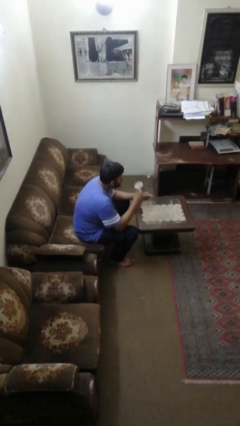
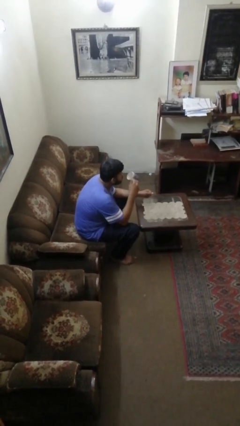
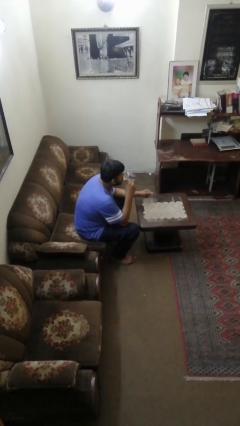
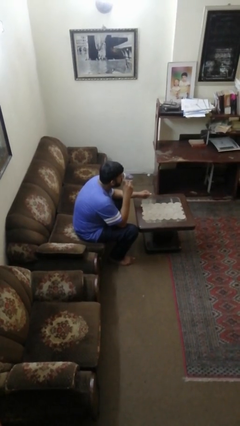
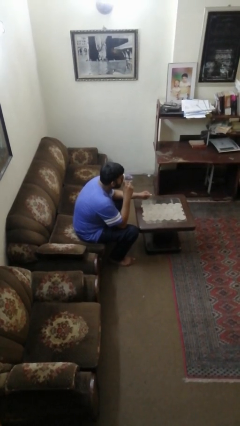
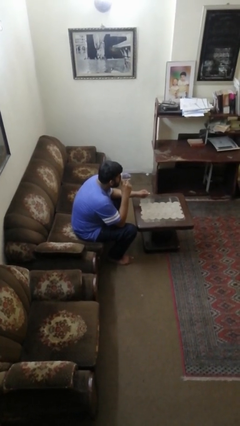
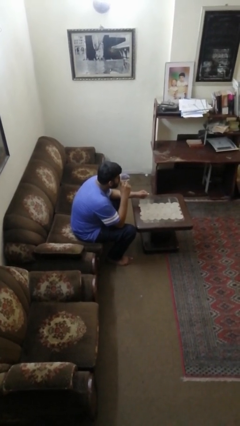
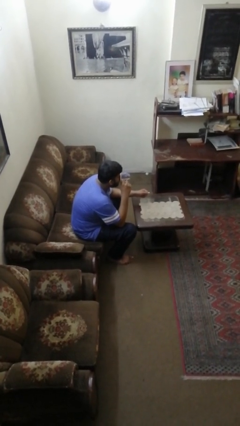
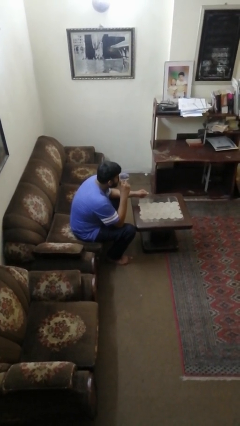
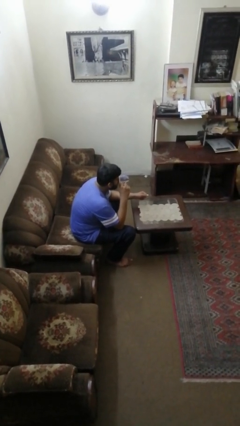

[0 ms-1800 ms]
person drinks from mug

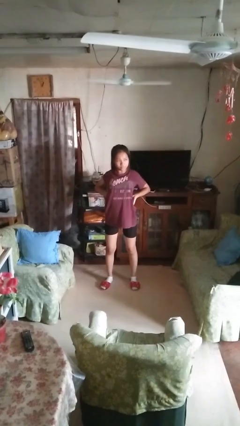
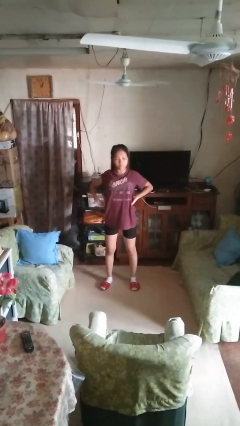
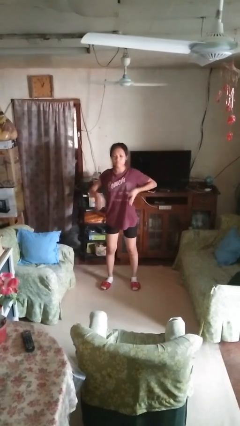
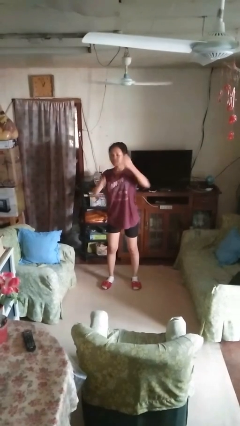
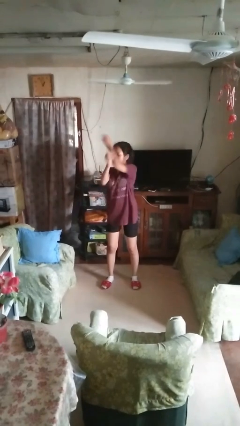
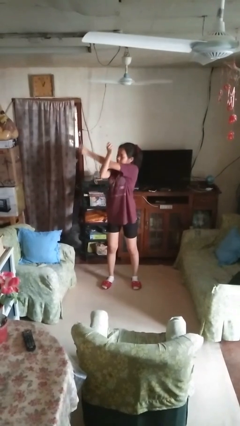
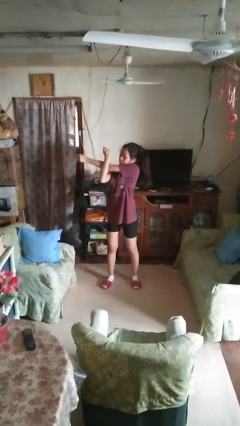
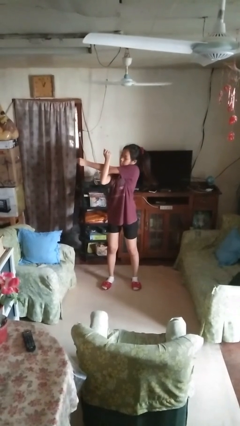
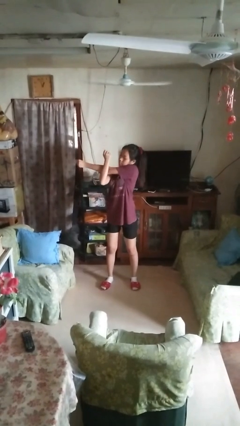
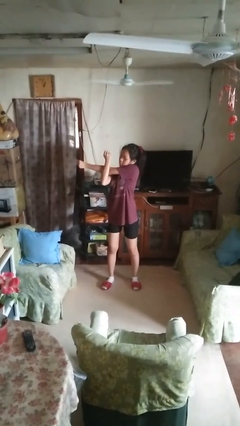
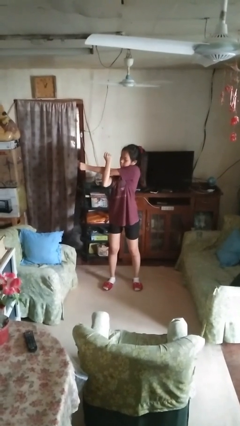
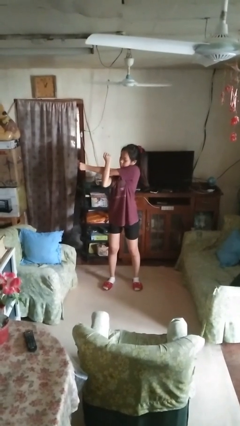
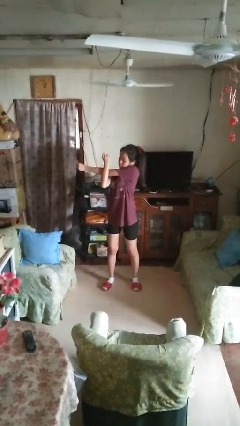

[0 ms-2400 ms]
person stretches arms to side

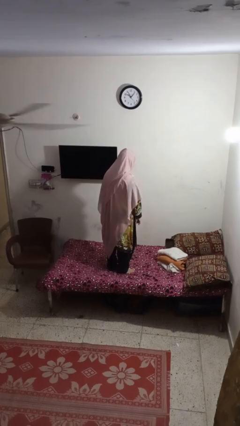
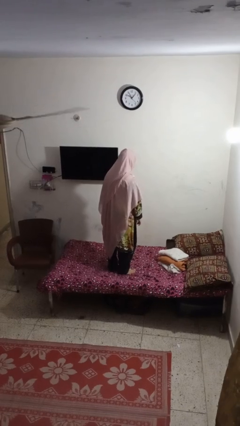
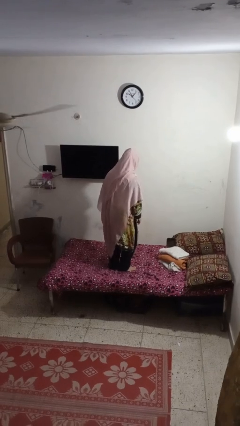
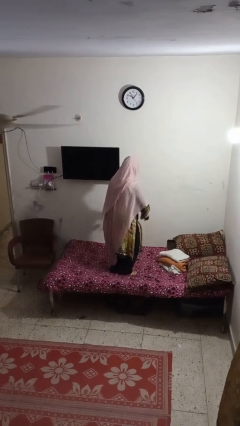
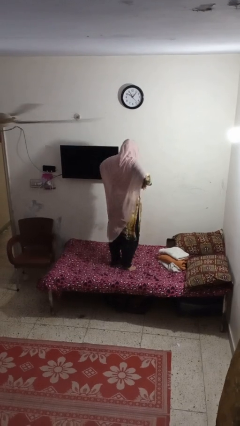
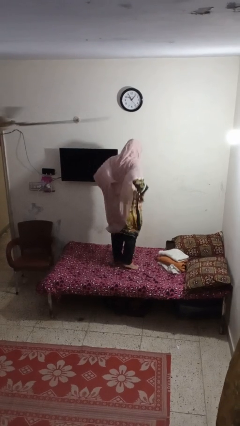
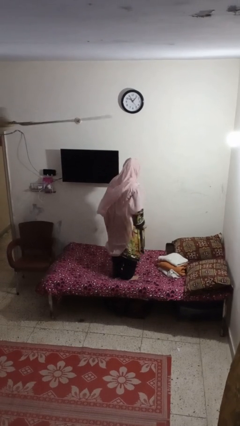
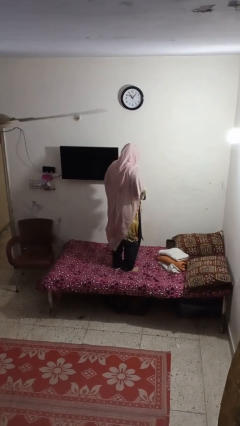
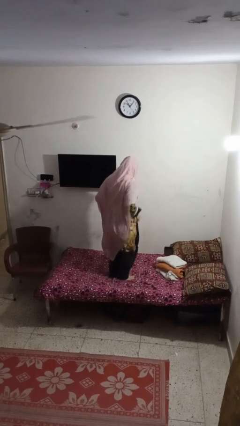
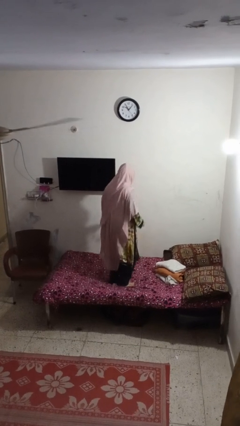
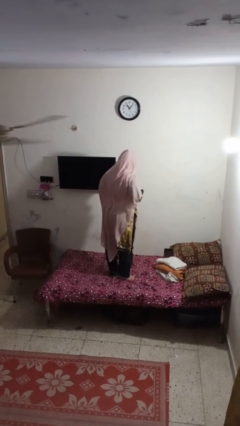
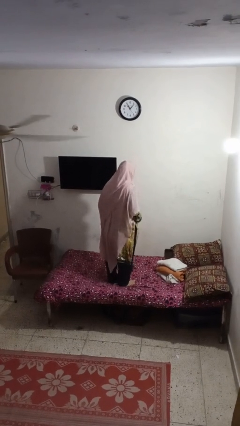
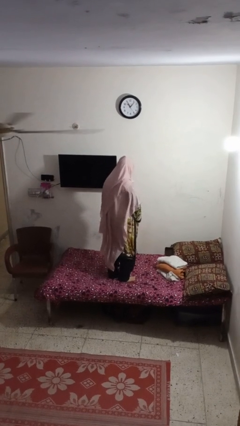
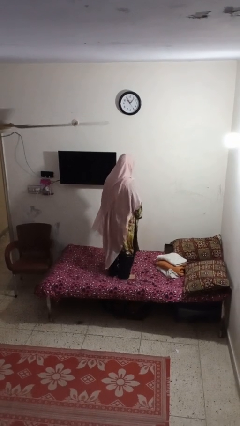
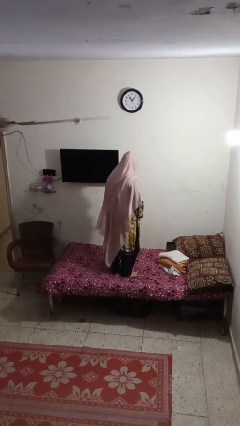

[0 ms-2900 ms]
person jumps on bed

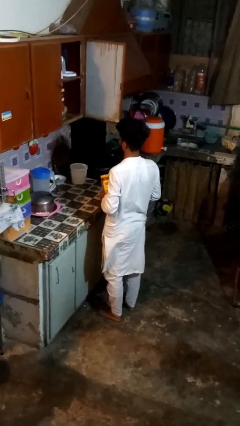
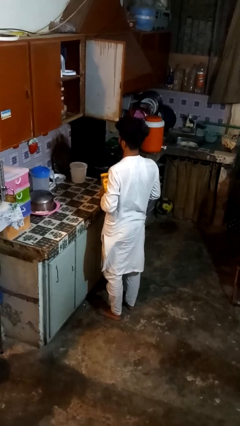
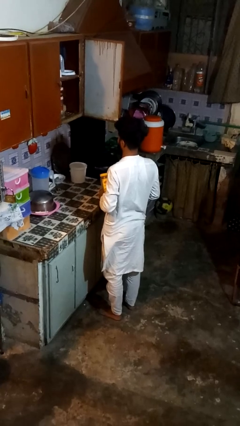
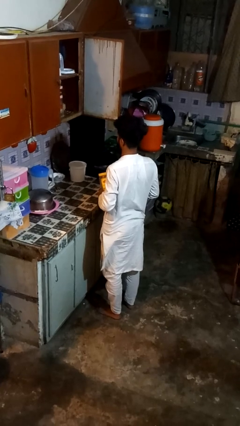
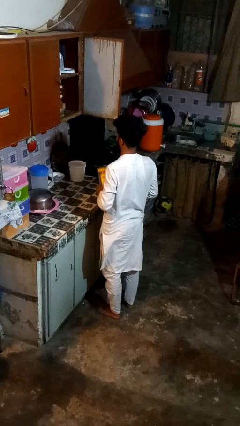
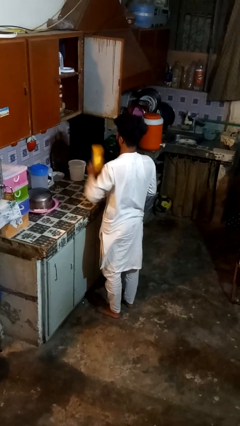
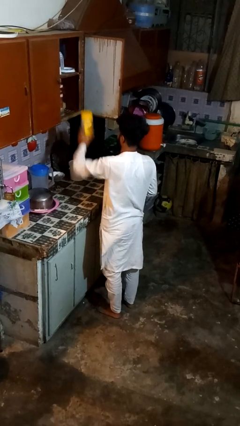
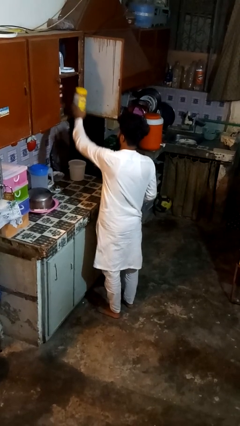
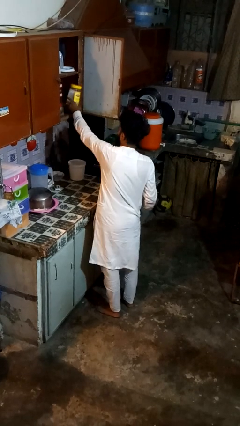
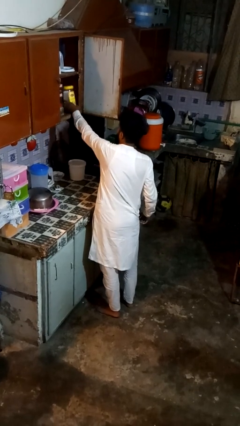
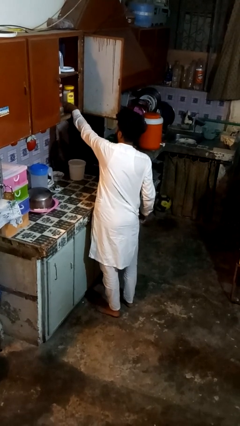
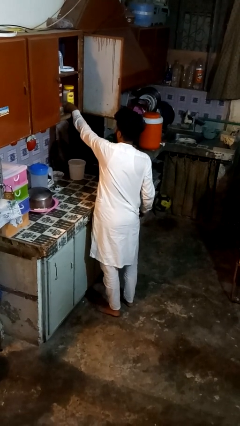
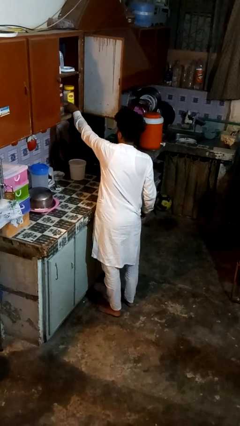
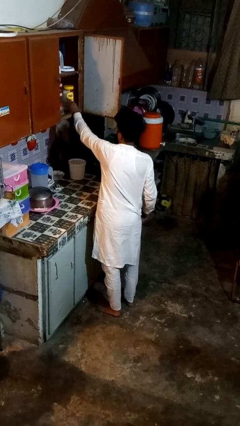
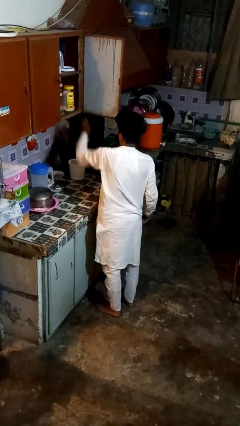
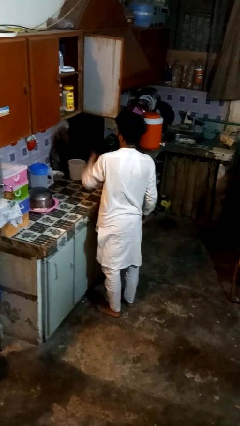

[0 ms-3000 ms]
person takes object from cabinet

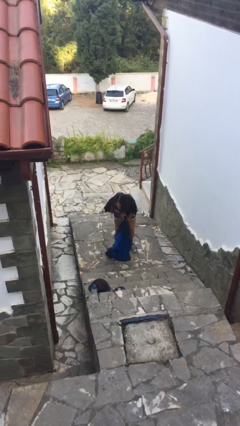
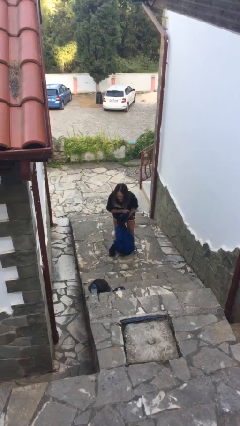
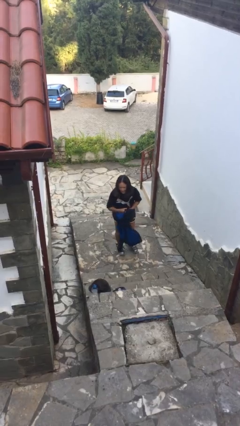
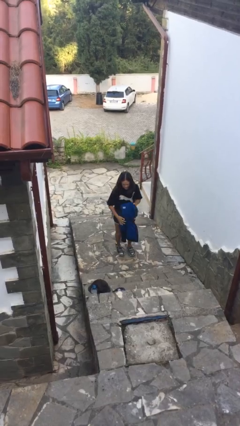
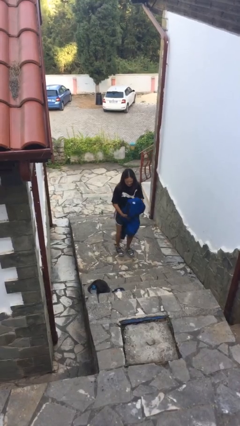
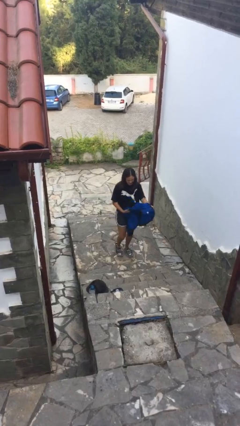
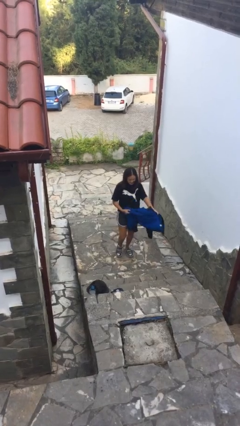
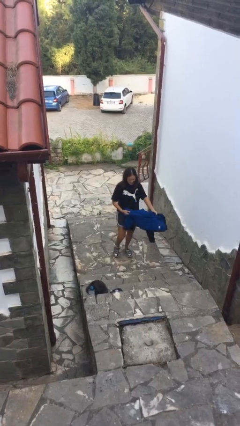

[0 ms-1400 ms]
person picks up object from floor

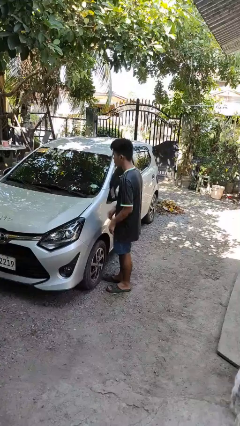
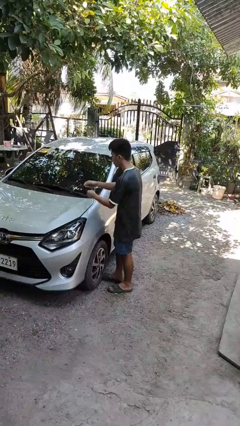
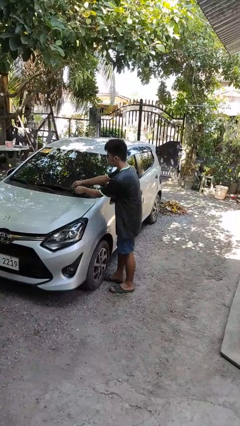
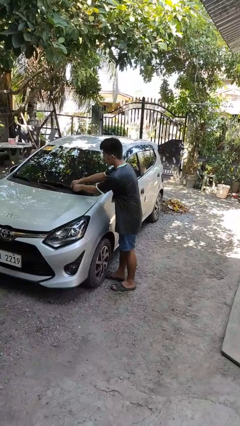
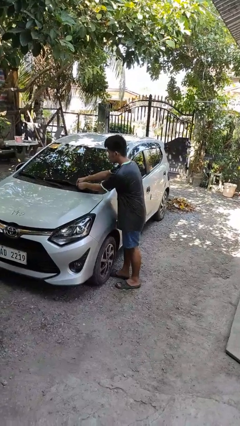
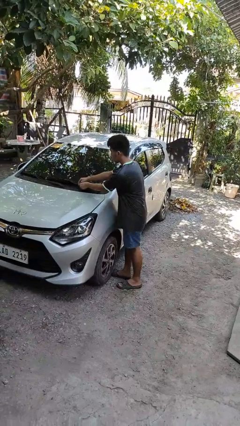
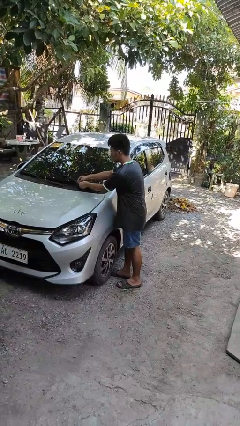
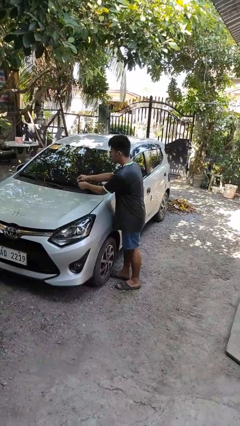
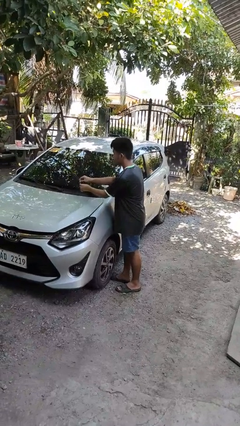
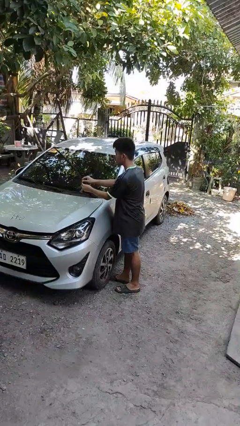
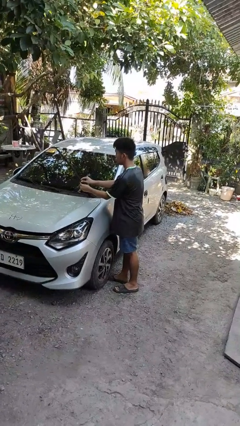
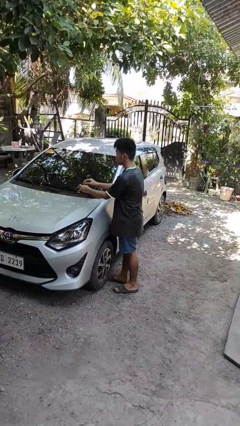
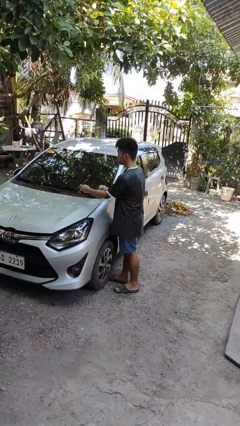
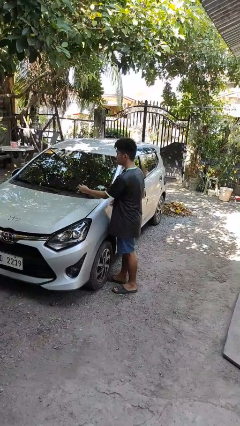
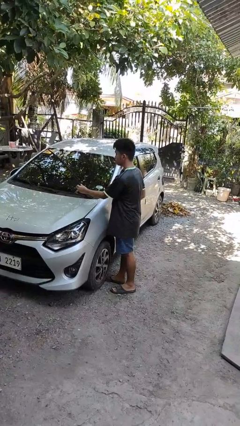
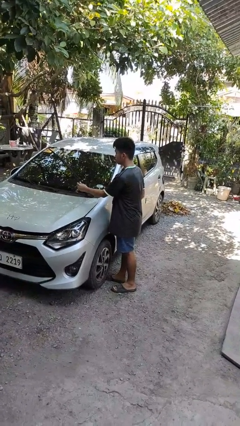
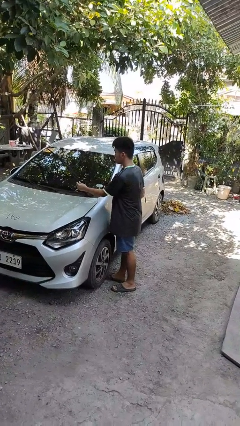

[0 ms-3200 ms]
person flips up car wipers

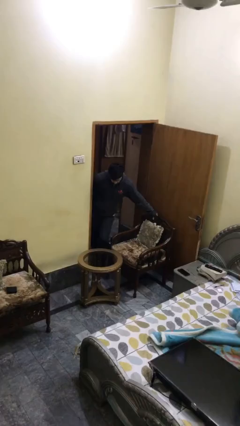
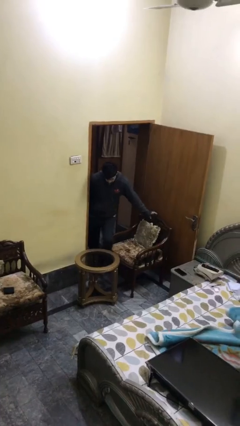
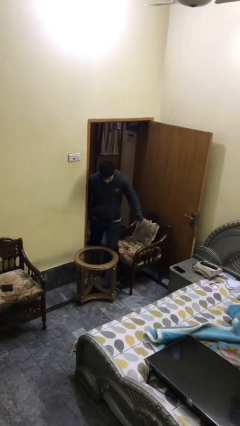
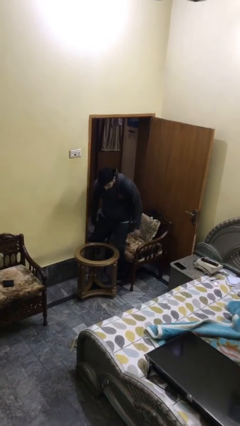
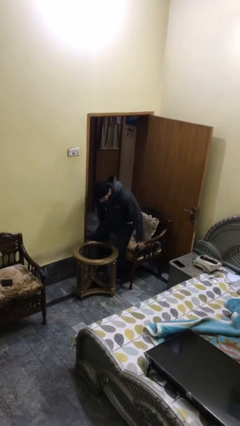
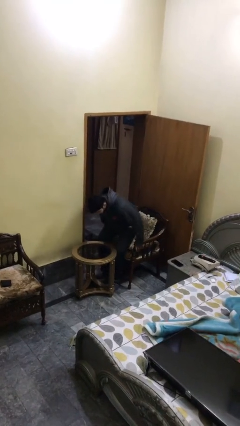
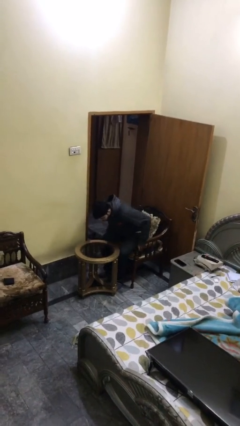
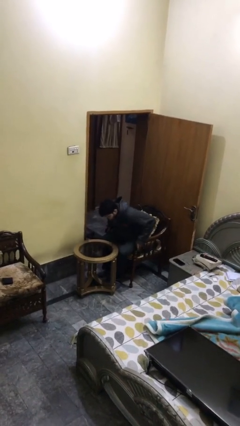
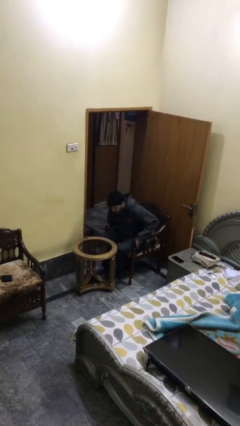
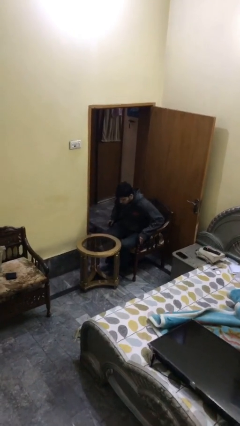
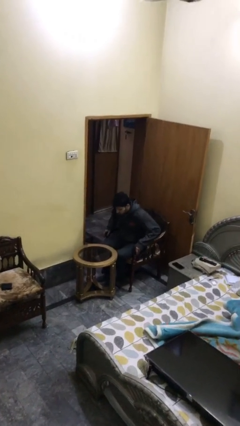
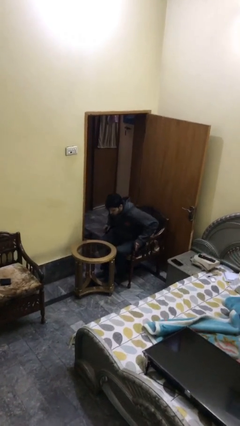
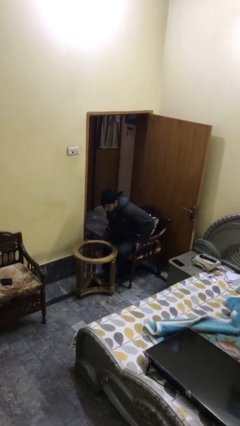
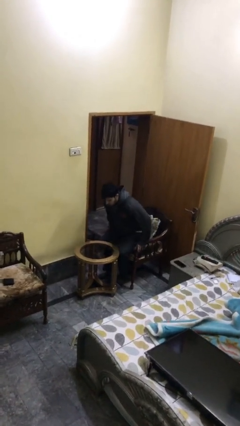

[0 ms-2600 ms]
person sits down

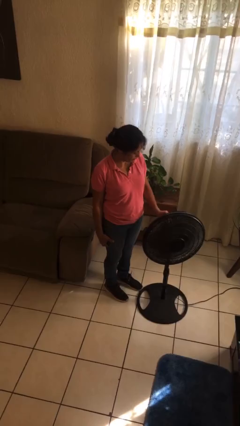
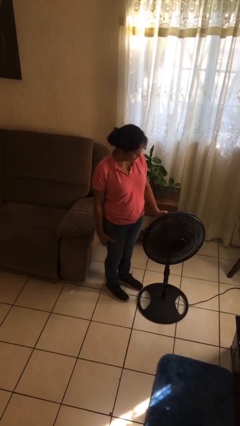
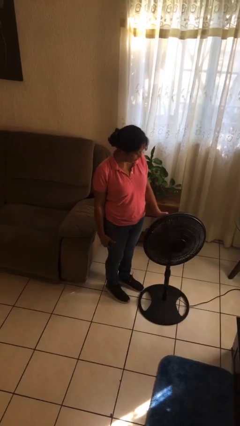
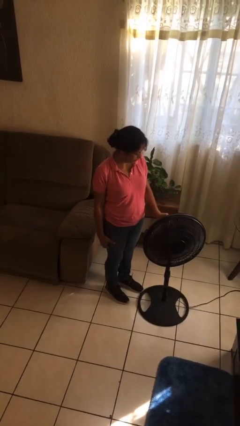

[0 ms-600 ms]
person turns off fan
